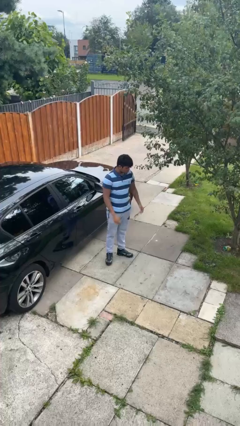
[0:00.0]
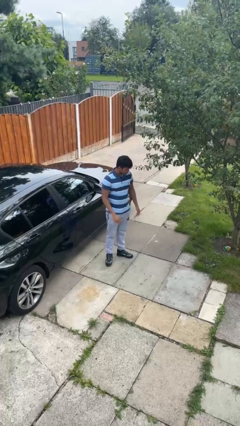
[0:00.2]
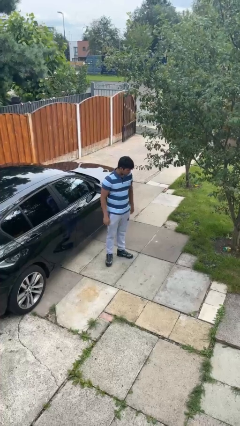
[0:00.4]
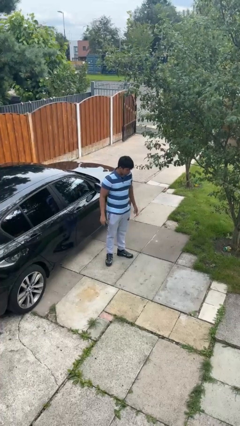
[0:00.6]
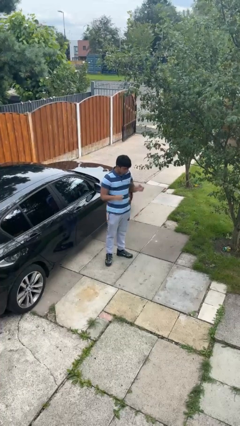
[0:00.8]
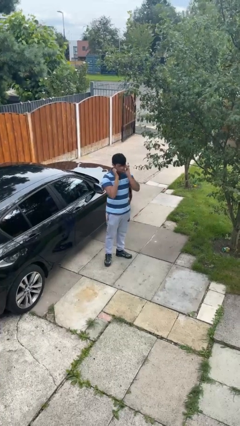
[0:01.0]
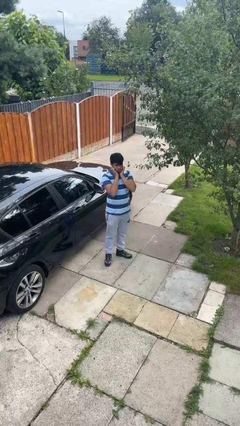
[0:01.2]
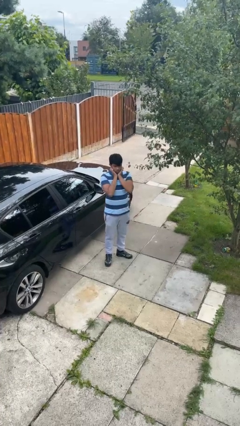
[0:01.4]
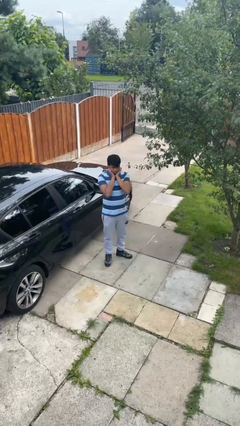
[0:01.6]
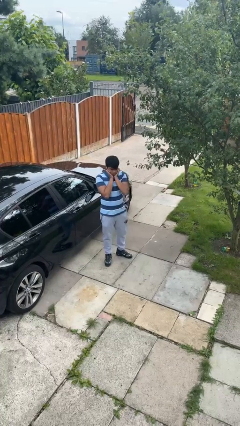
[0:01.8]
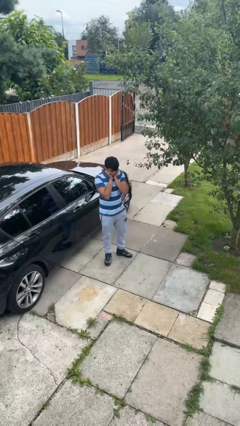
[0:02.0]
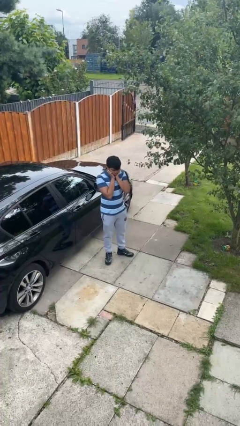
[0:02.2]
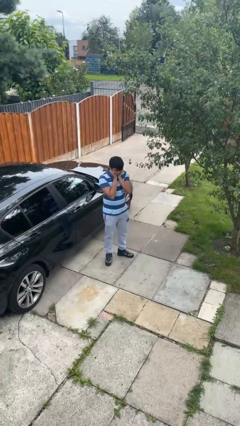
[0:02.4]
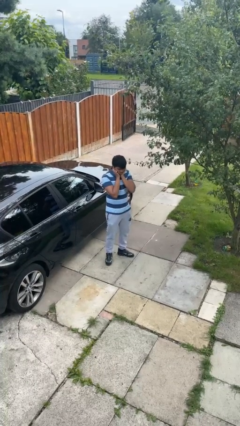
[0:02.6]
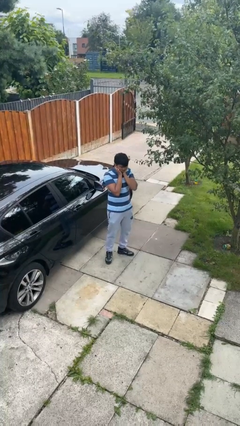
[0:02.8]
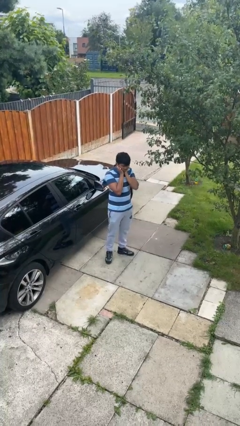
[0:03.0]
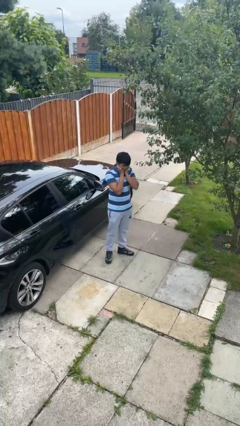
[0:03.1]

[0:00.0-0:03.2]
person puts fingers in ear

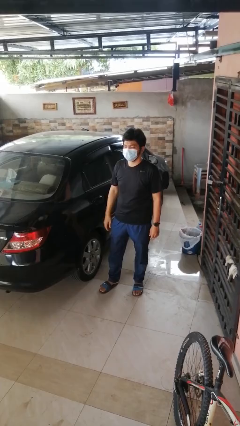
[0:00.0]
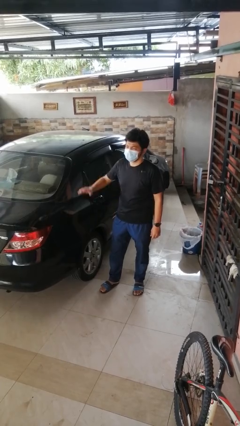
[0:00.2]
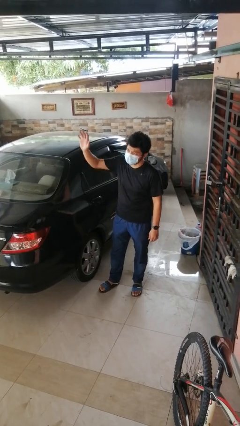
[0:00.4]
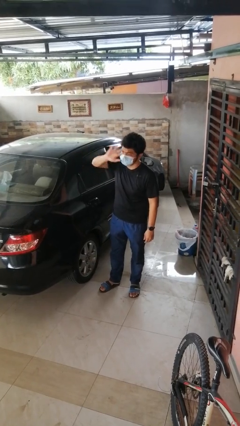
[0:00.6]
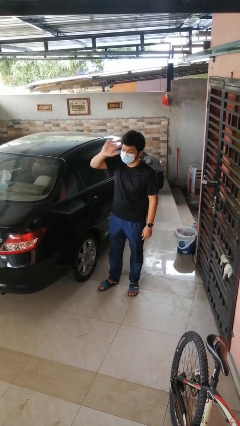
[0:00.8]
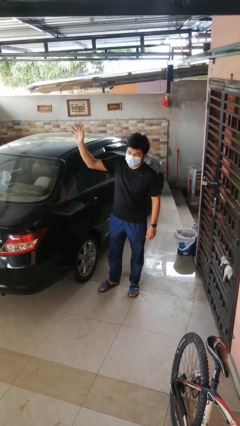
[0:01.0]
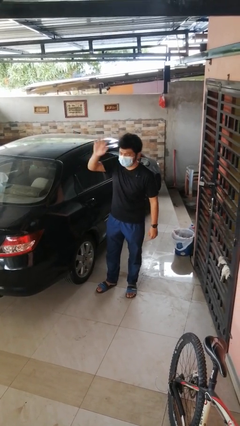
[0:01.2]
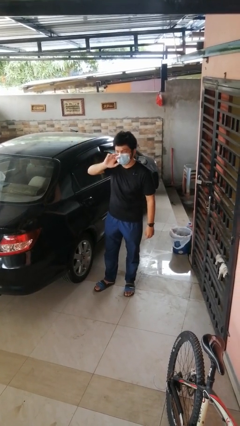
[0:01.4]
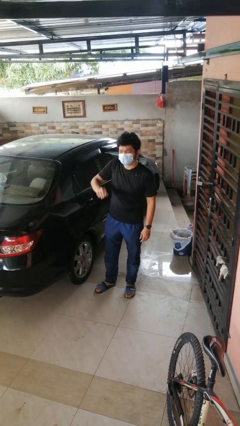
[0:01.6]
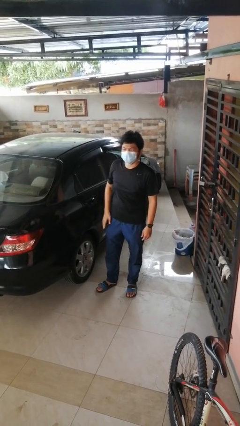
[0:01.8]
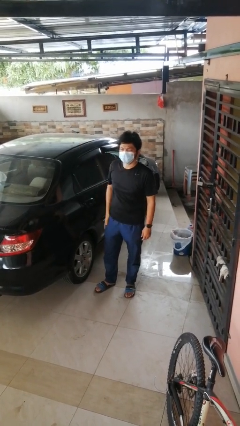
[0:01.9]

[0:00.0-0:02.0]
person waves at person

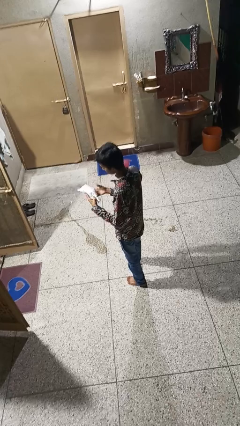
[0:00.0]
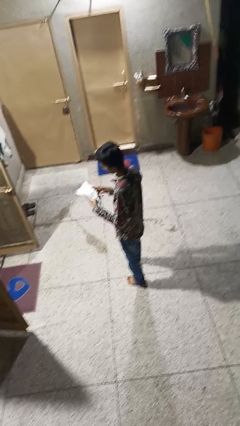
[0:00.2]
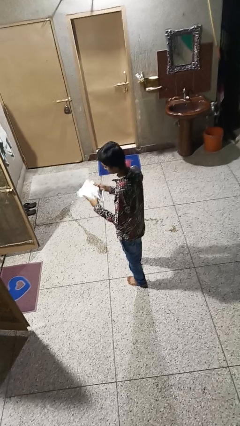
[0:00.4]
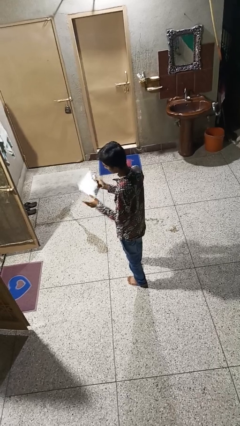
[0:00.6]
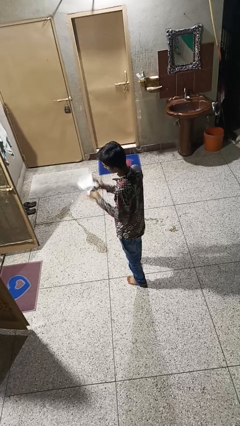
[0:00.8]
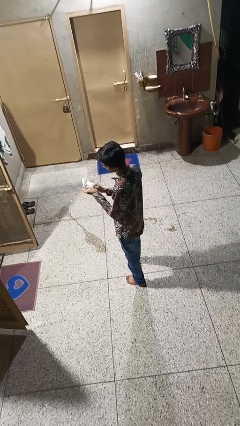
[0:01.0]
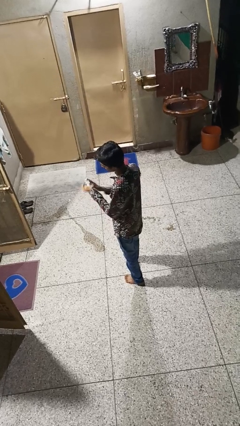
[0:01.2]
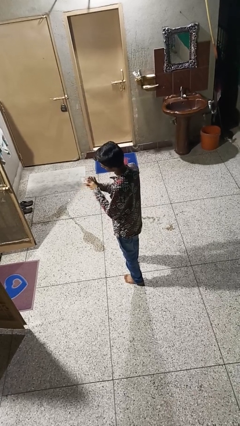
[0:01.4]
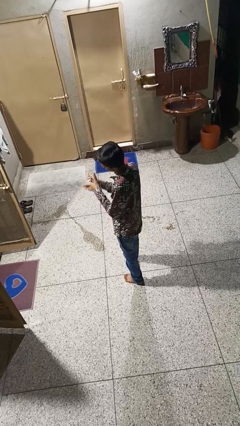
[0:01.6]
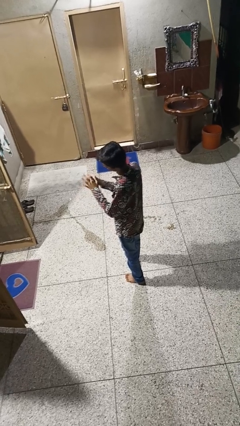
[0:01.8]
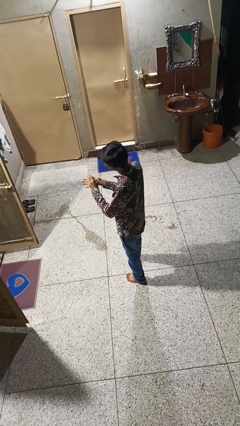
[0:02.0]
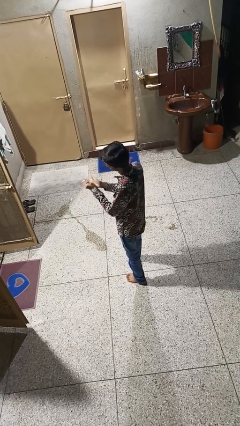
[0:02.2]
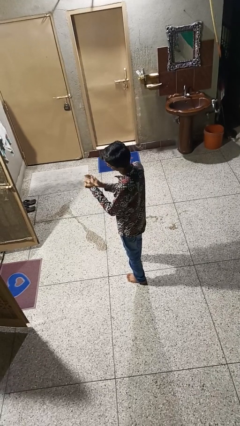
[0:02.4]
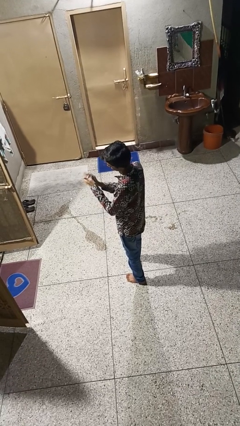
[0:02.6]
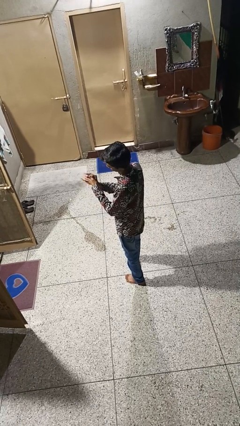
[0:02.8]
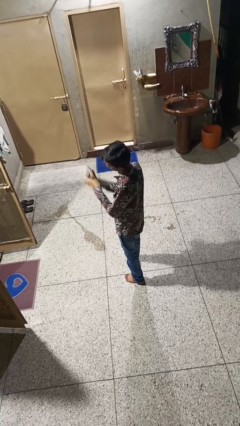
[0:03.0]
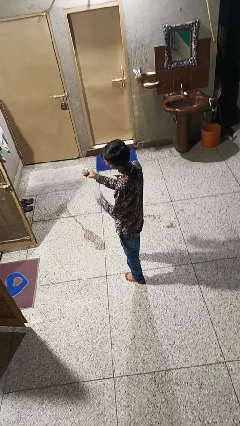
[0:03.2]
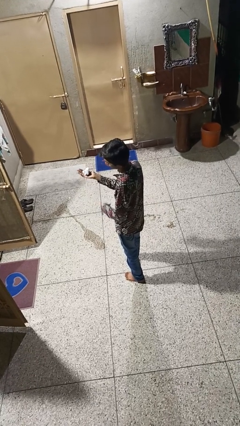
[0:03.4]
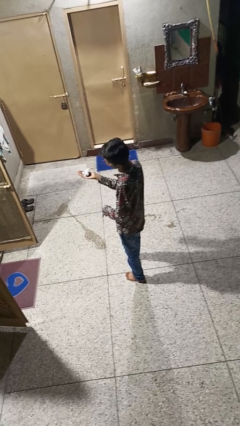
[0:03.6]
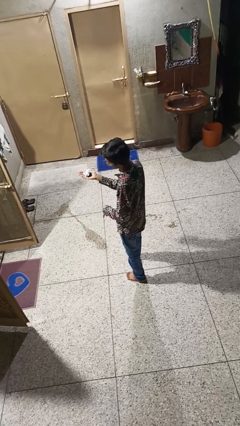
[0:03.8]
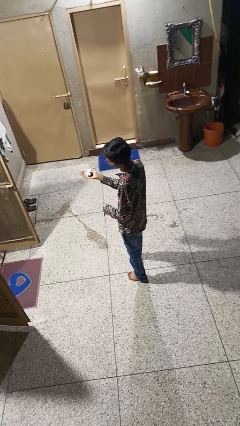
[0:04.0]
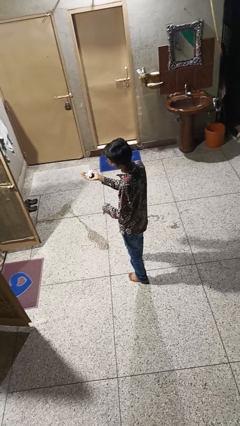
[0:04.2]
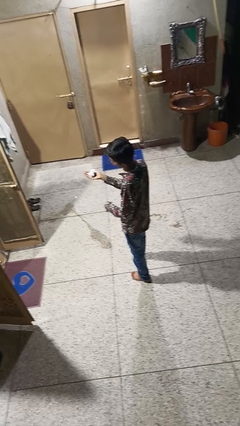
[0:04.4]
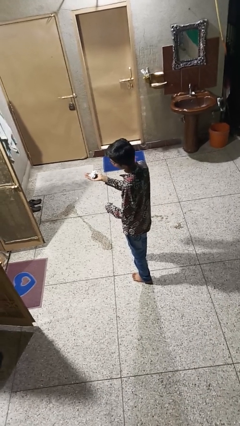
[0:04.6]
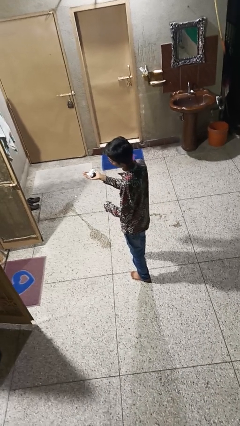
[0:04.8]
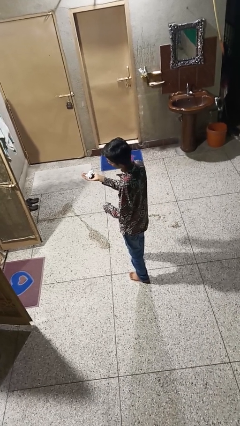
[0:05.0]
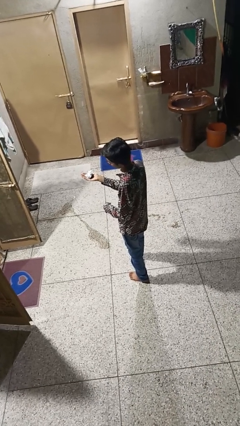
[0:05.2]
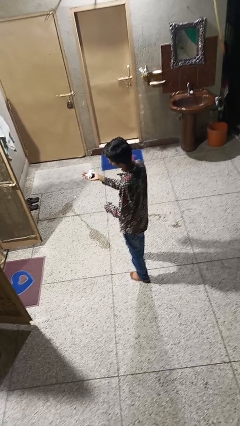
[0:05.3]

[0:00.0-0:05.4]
person crumples paper

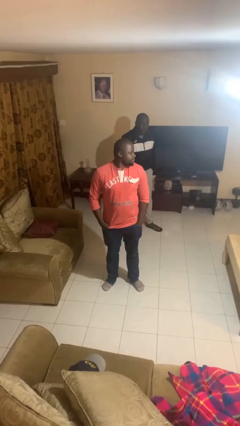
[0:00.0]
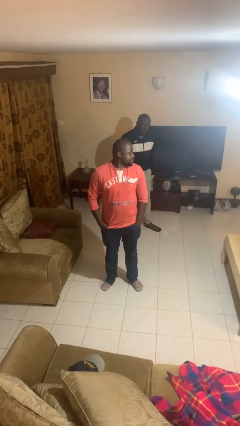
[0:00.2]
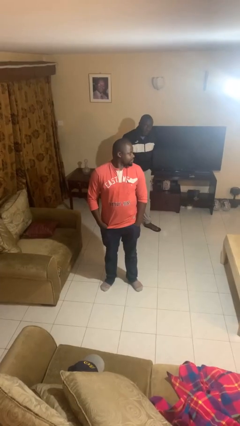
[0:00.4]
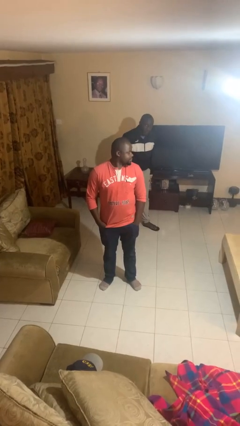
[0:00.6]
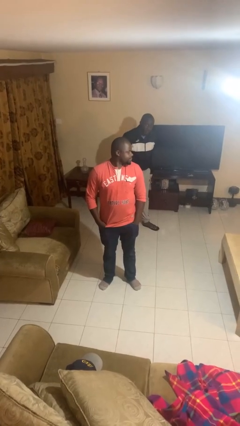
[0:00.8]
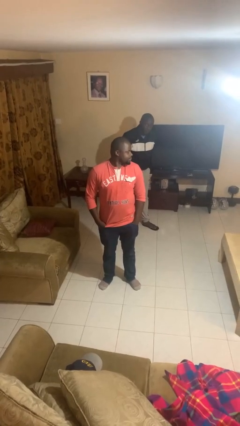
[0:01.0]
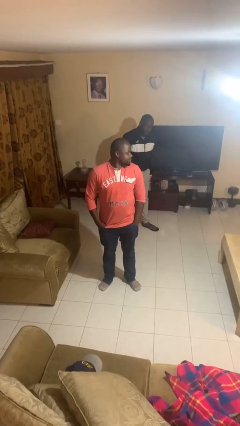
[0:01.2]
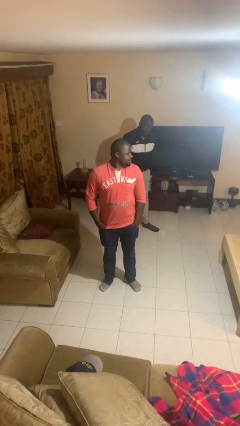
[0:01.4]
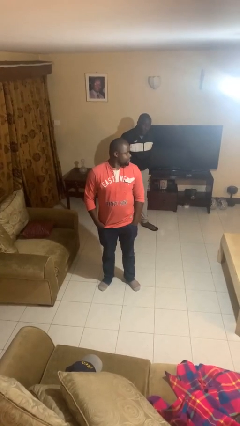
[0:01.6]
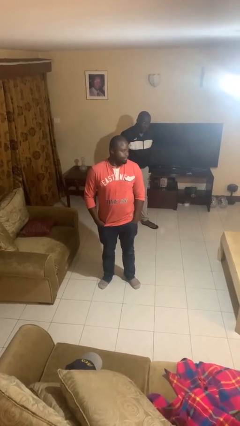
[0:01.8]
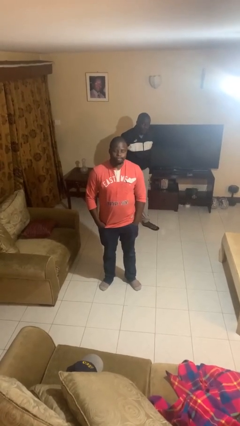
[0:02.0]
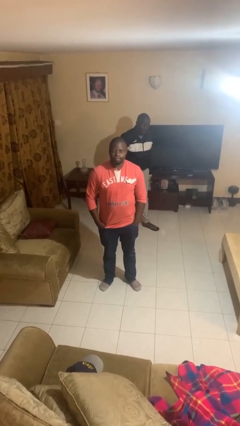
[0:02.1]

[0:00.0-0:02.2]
person looks over shoulder

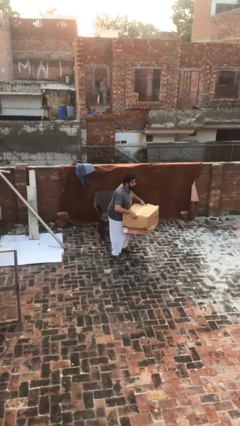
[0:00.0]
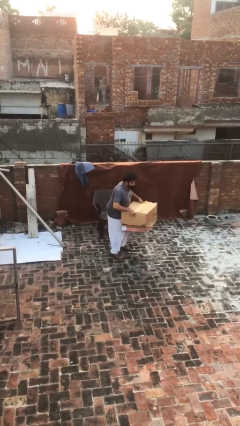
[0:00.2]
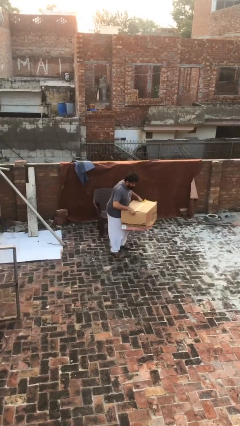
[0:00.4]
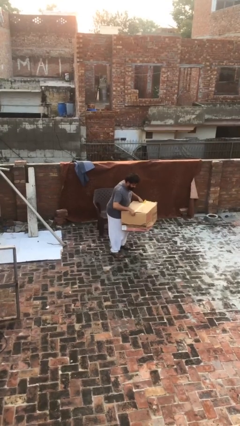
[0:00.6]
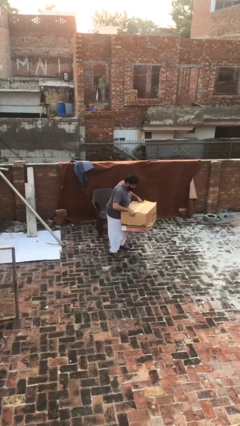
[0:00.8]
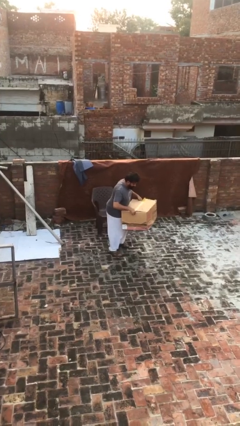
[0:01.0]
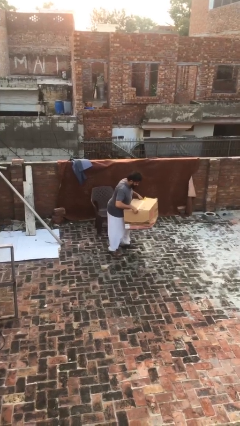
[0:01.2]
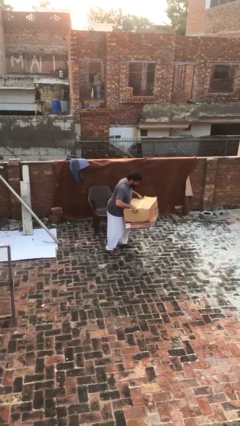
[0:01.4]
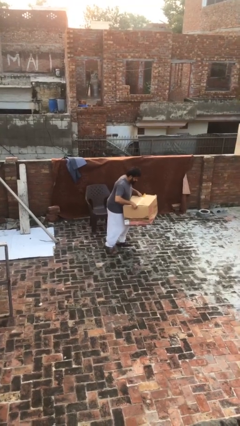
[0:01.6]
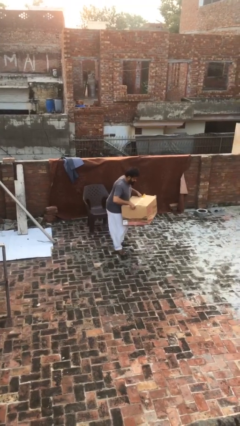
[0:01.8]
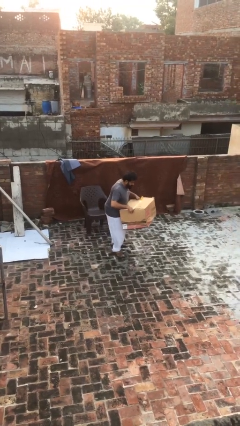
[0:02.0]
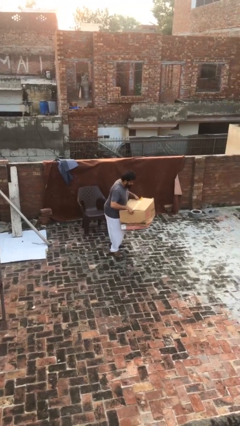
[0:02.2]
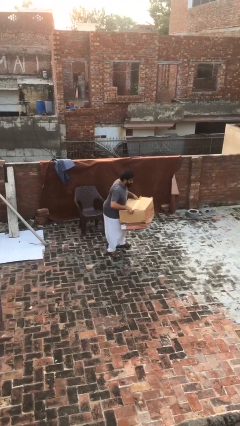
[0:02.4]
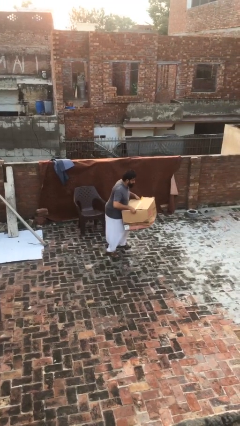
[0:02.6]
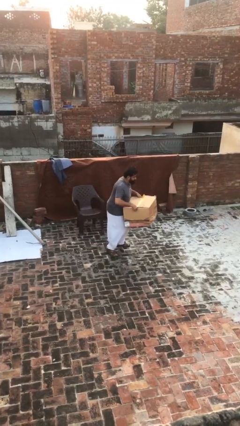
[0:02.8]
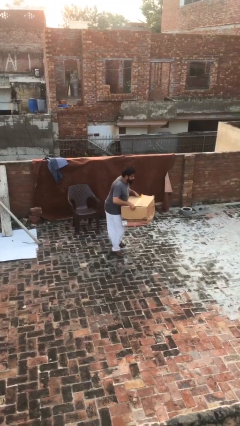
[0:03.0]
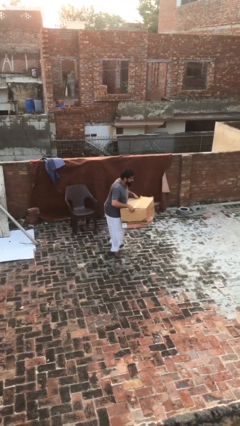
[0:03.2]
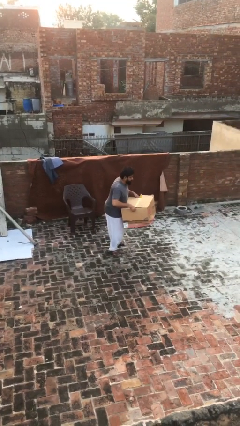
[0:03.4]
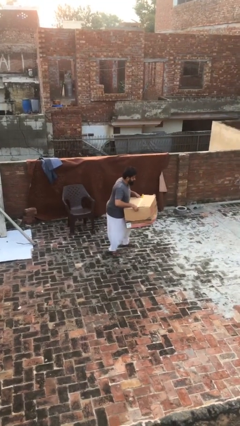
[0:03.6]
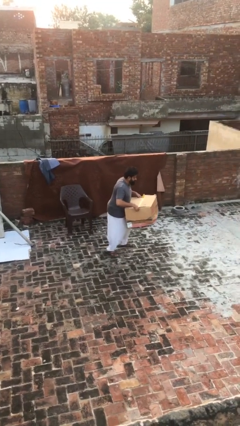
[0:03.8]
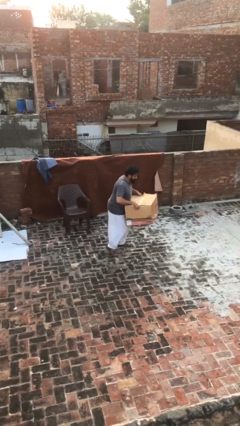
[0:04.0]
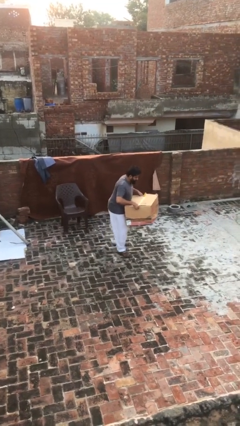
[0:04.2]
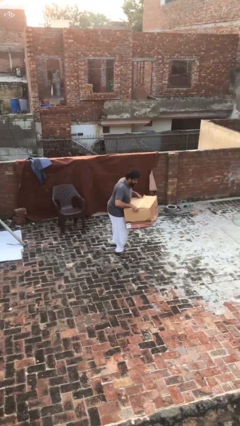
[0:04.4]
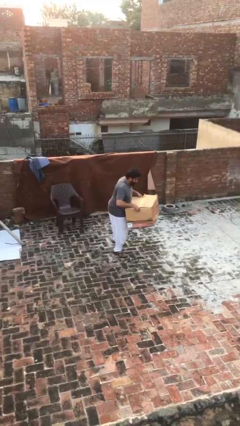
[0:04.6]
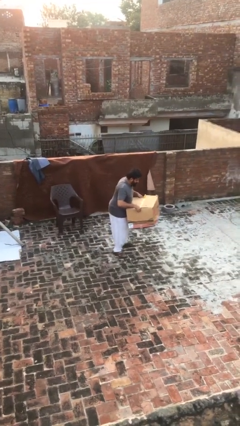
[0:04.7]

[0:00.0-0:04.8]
person carries heavy object
